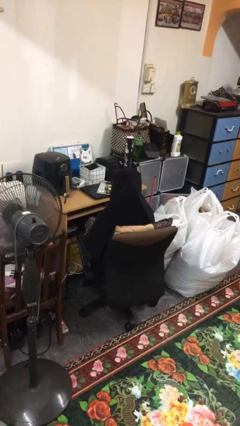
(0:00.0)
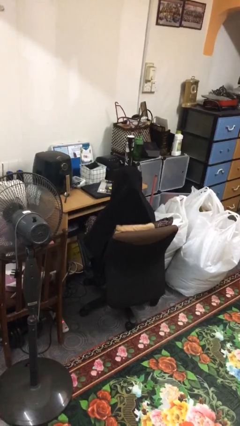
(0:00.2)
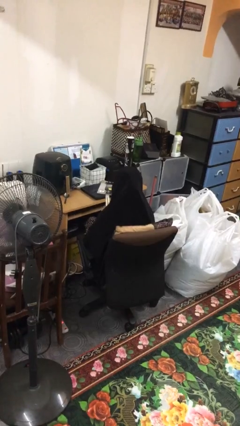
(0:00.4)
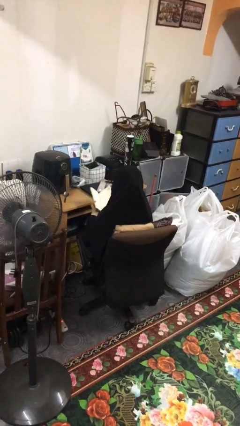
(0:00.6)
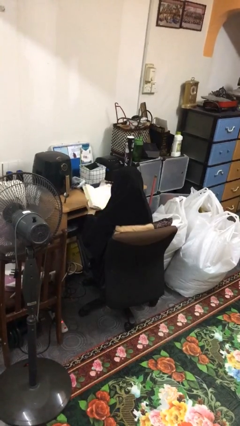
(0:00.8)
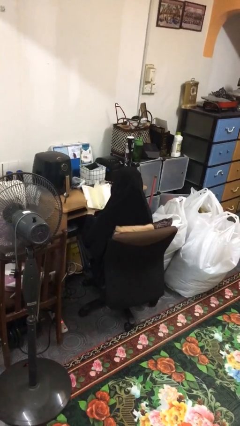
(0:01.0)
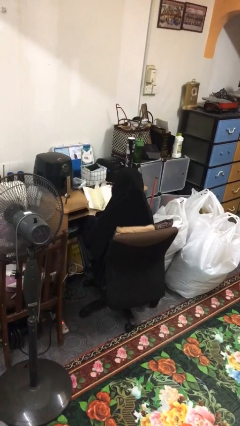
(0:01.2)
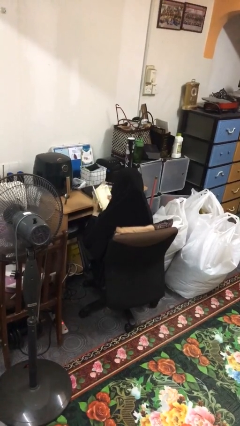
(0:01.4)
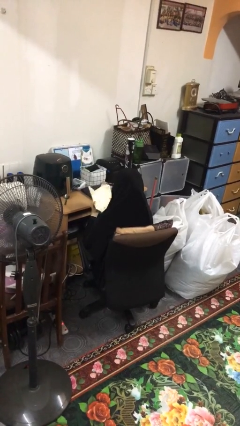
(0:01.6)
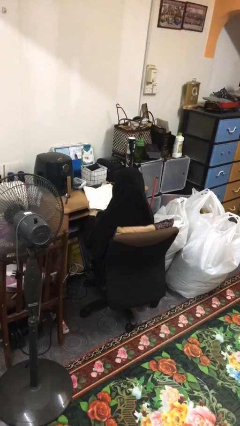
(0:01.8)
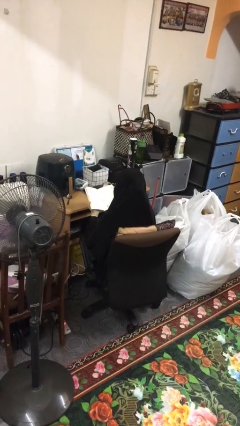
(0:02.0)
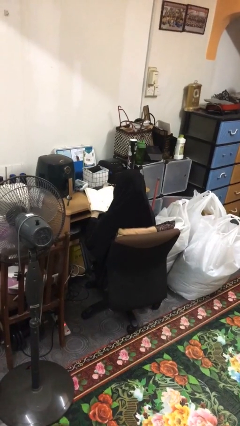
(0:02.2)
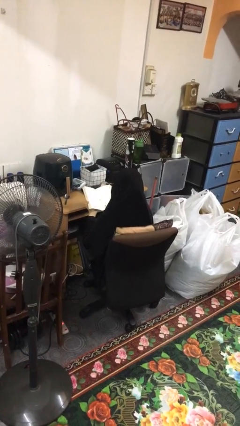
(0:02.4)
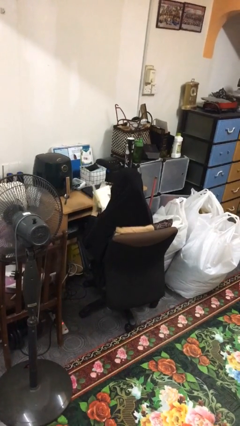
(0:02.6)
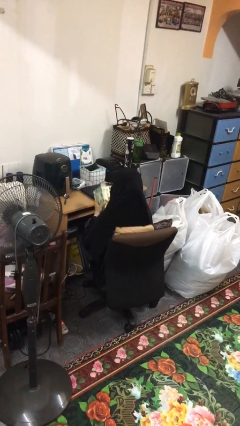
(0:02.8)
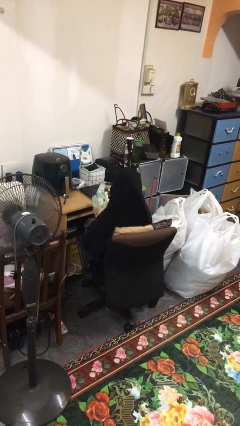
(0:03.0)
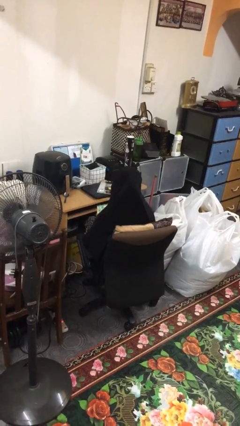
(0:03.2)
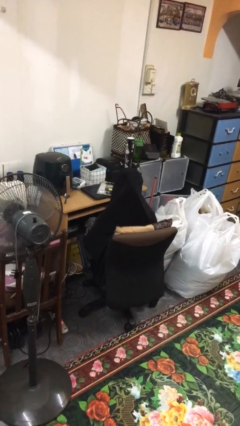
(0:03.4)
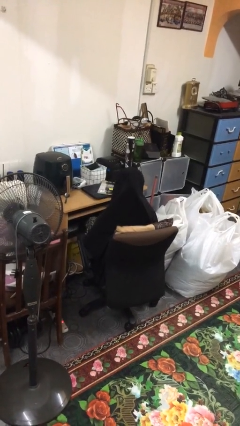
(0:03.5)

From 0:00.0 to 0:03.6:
person reads book

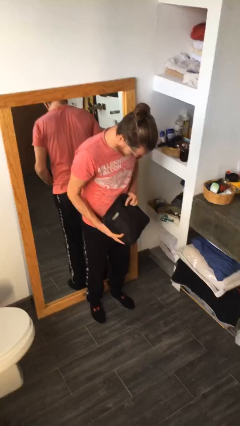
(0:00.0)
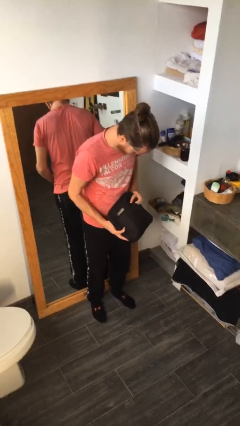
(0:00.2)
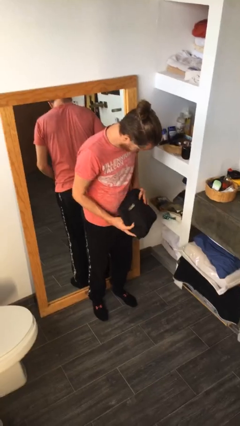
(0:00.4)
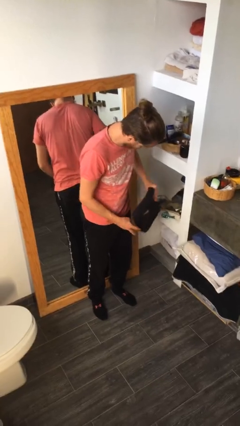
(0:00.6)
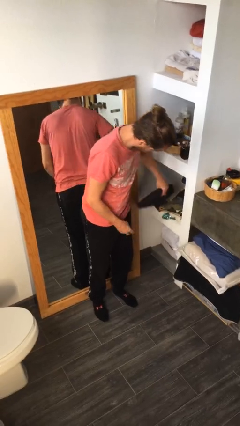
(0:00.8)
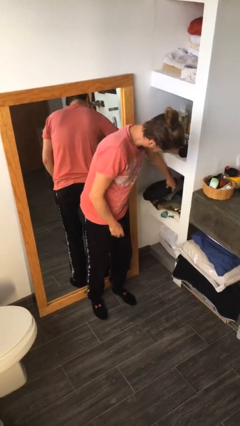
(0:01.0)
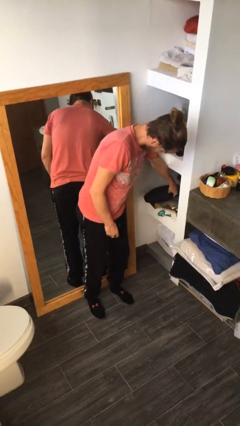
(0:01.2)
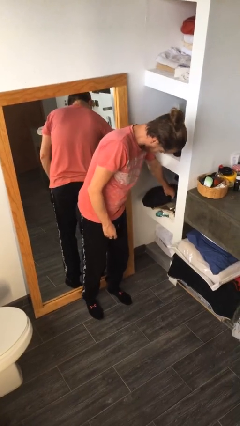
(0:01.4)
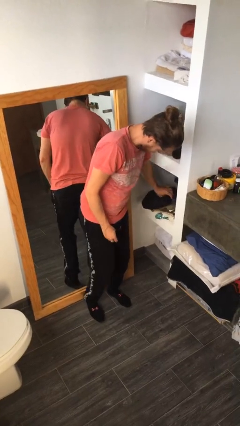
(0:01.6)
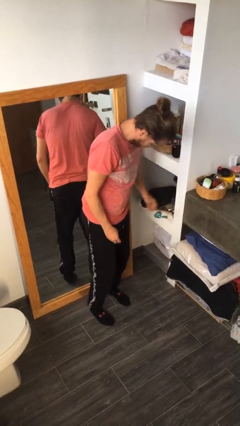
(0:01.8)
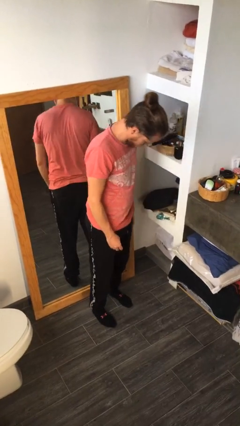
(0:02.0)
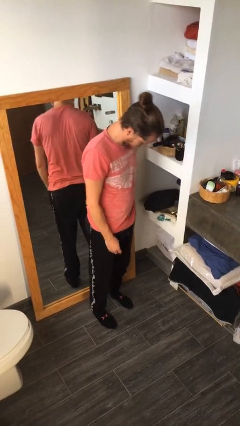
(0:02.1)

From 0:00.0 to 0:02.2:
person puts down object into cabinet

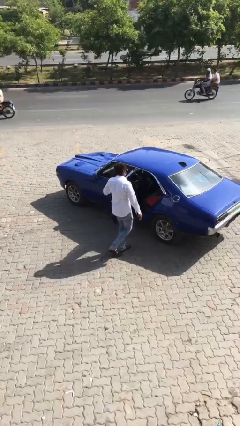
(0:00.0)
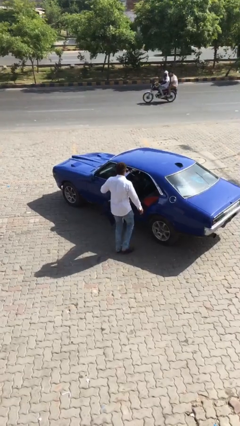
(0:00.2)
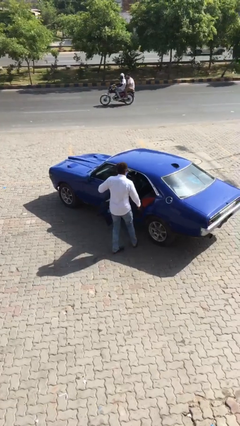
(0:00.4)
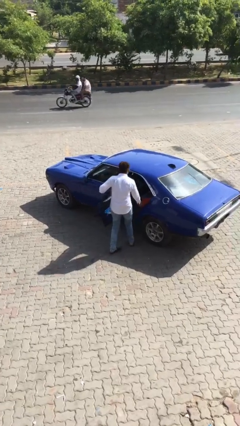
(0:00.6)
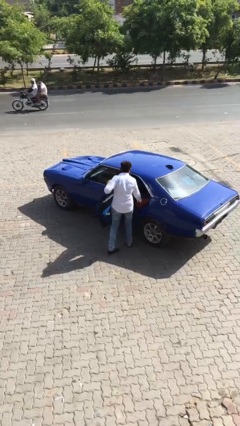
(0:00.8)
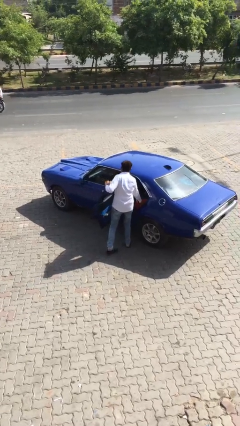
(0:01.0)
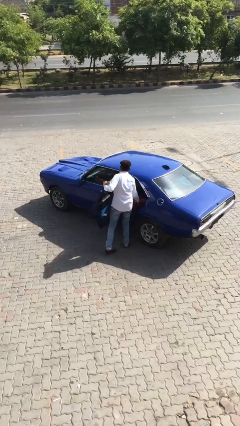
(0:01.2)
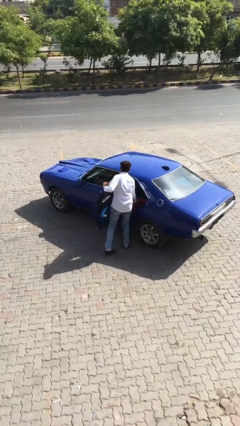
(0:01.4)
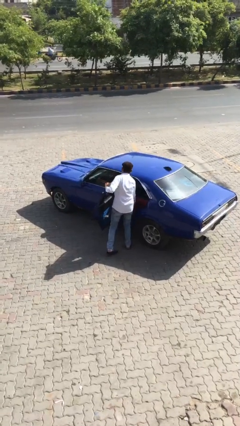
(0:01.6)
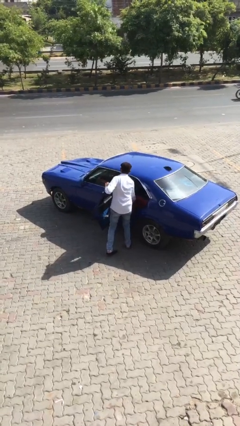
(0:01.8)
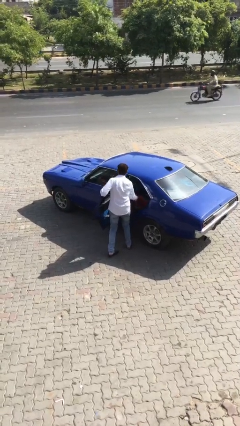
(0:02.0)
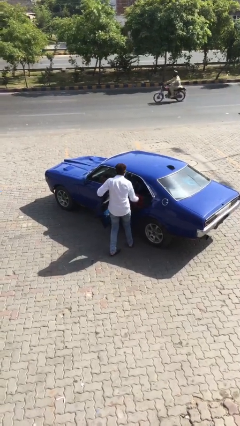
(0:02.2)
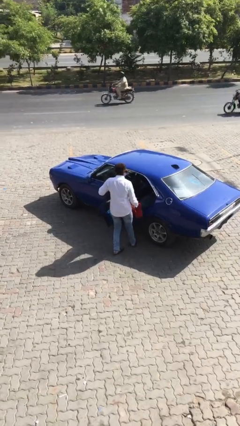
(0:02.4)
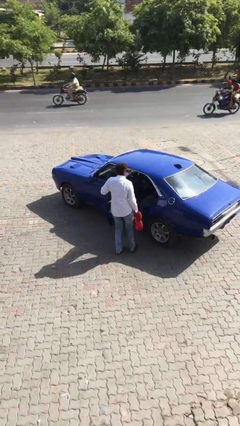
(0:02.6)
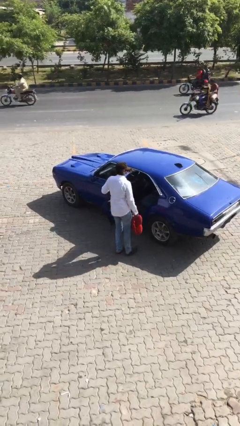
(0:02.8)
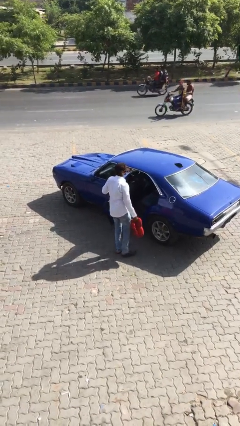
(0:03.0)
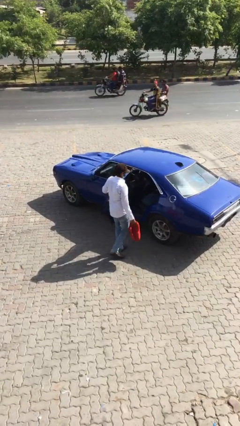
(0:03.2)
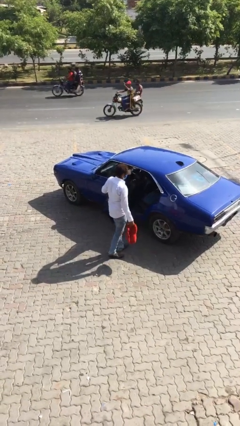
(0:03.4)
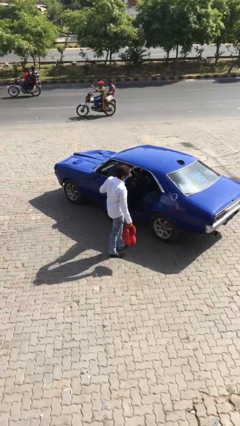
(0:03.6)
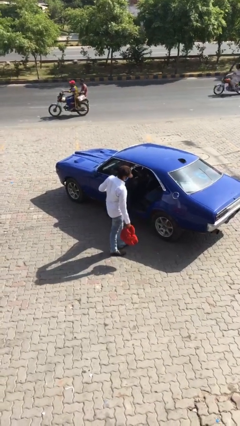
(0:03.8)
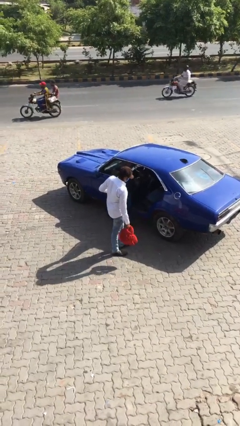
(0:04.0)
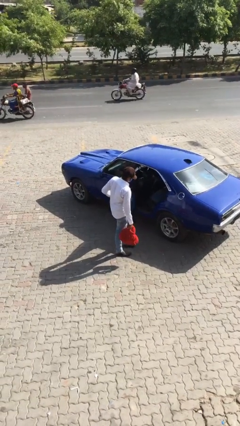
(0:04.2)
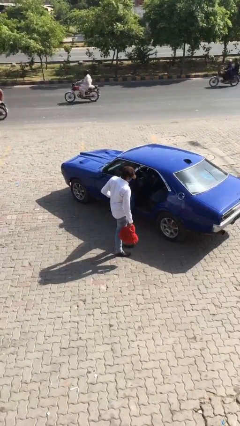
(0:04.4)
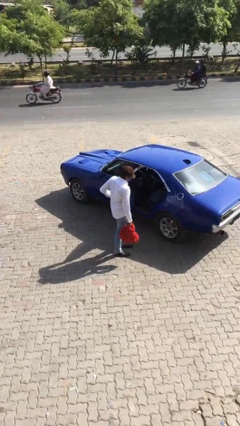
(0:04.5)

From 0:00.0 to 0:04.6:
person unloads car

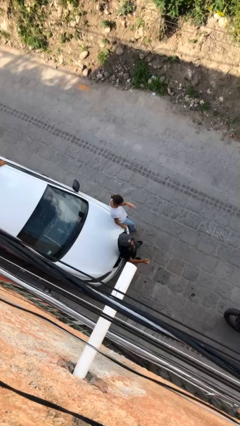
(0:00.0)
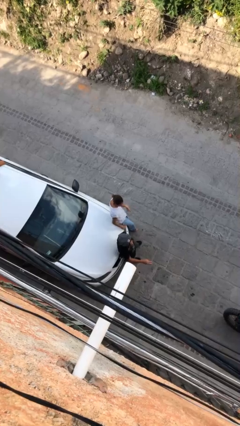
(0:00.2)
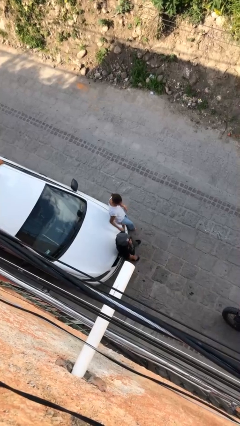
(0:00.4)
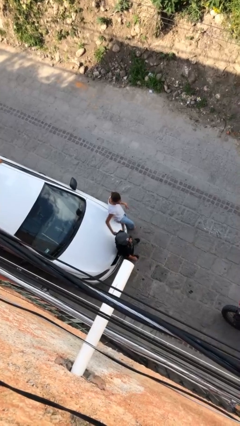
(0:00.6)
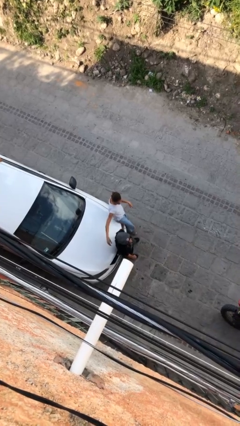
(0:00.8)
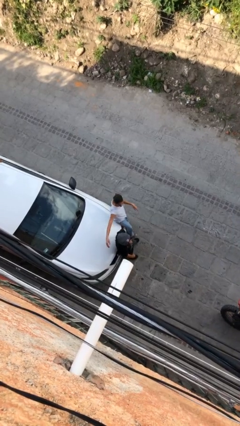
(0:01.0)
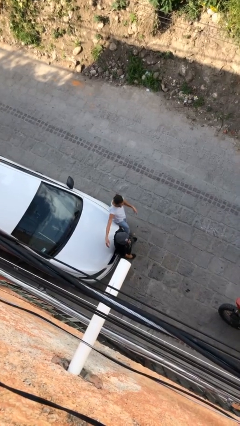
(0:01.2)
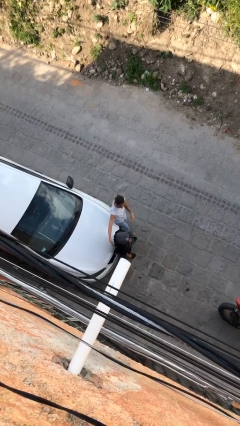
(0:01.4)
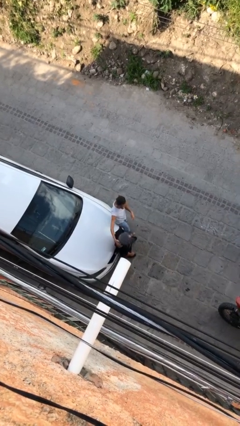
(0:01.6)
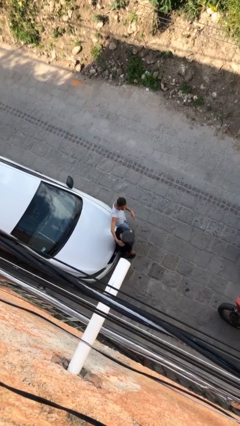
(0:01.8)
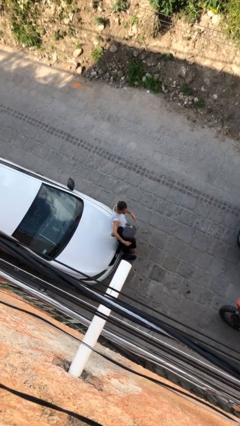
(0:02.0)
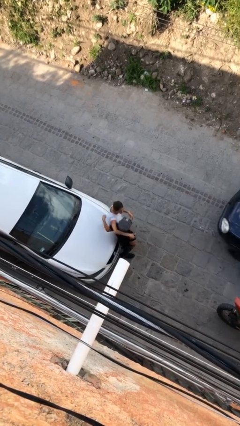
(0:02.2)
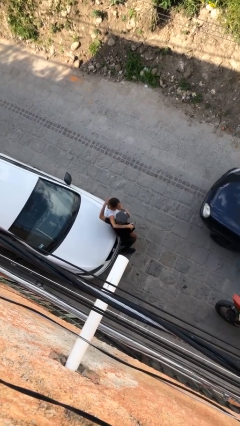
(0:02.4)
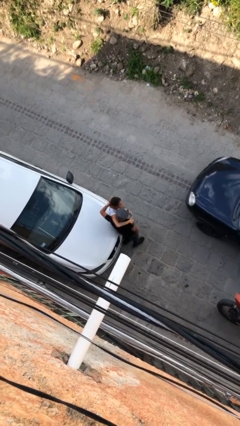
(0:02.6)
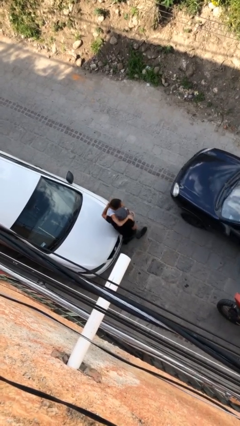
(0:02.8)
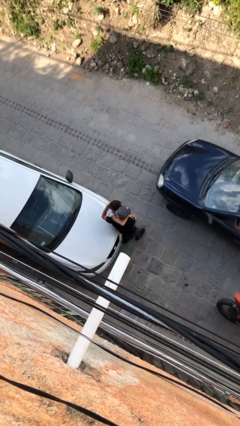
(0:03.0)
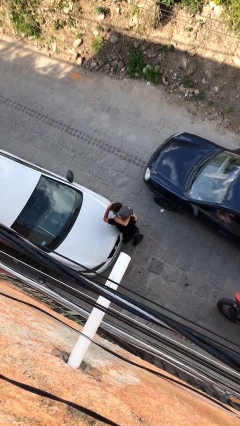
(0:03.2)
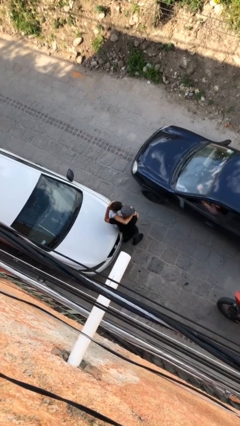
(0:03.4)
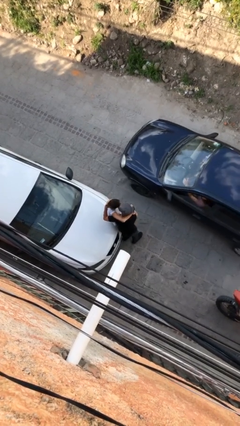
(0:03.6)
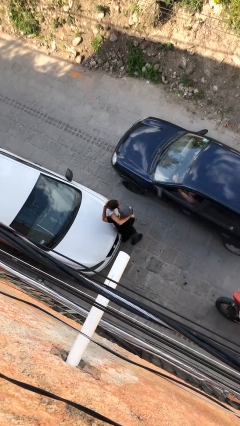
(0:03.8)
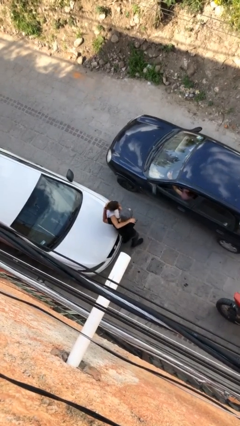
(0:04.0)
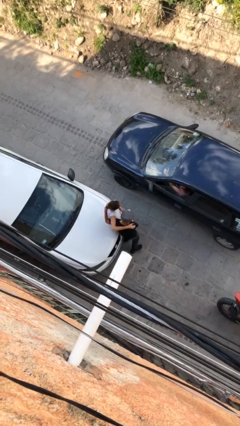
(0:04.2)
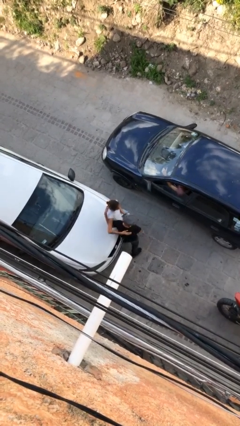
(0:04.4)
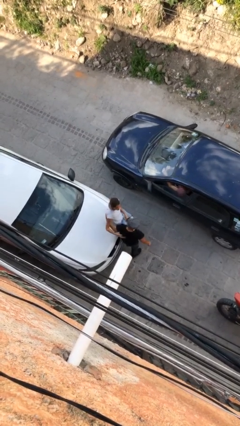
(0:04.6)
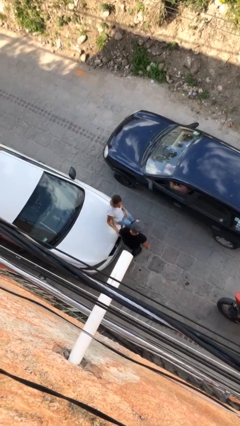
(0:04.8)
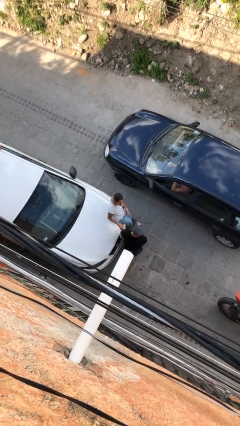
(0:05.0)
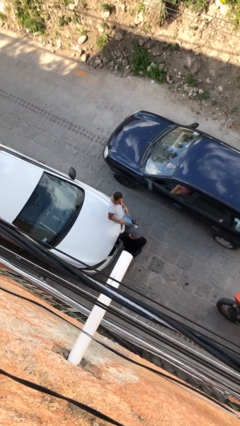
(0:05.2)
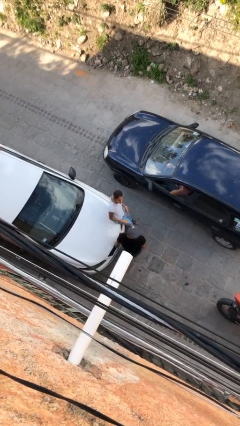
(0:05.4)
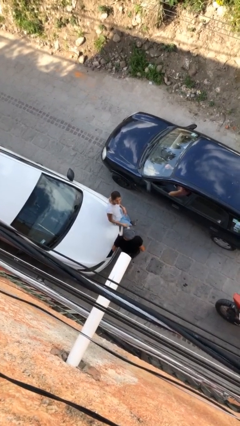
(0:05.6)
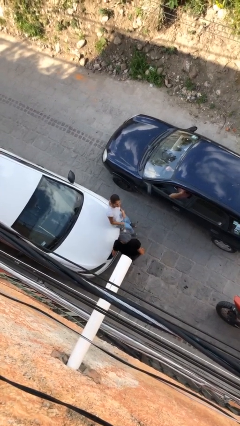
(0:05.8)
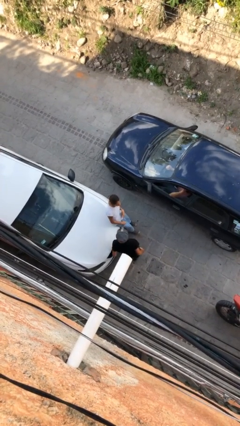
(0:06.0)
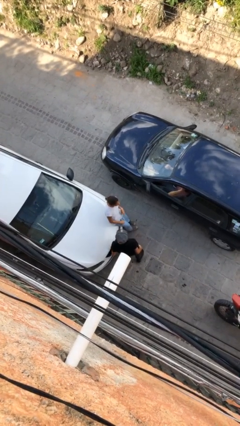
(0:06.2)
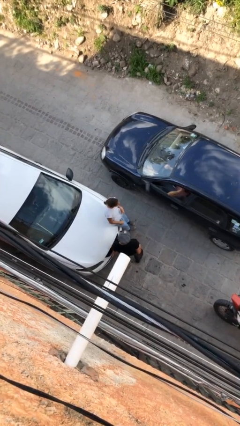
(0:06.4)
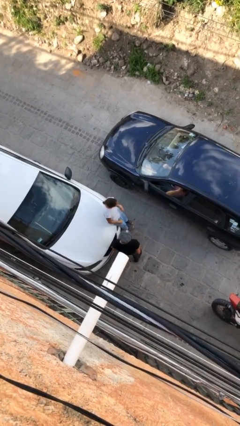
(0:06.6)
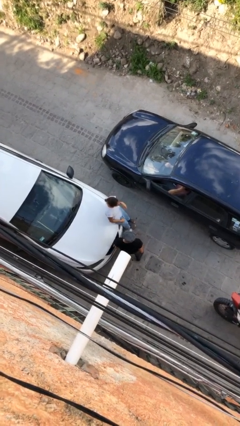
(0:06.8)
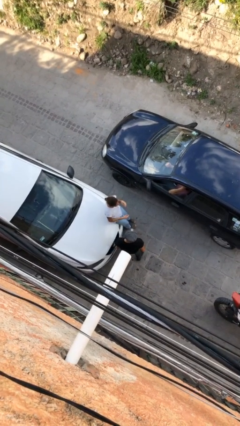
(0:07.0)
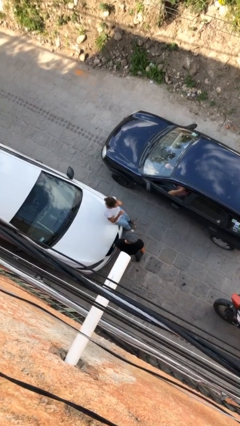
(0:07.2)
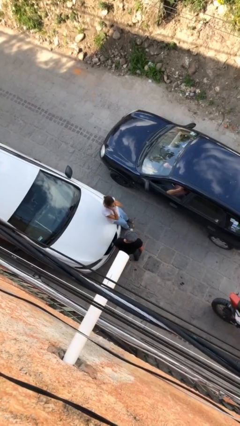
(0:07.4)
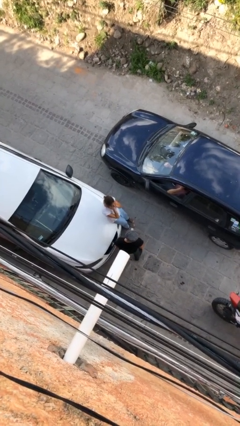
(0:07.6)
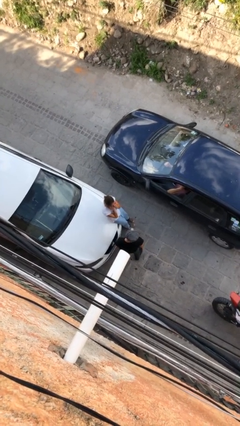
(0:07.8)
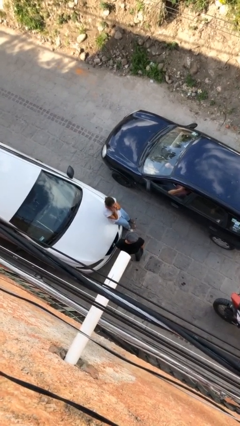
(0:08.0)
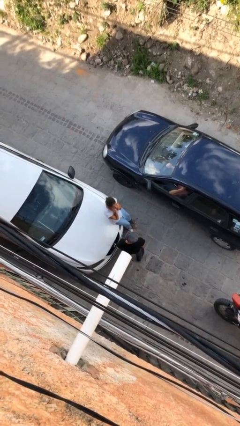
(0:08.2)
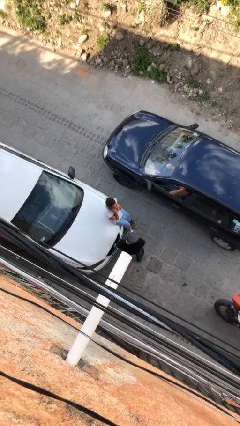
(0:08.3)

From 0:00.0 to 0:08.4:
person embraces person
